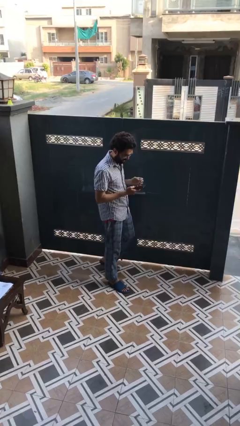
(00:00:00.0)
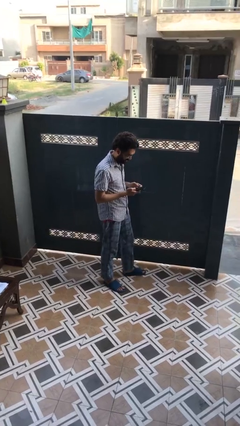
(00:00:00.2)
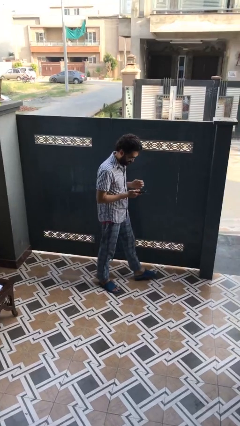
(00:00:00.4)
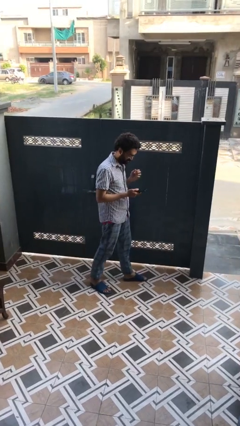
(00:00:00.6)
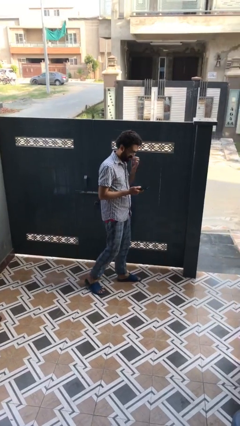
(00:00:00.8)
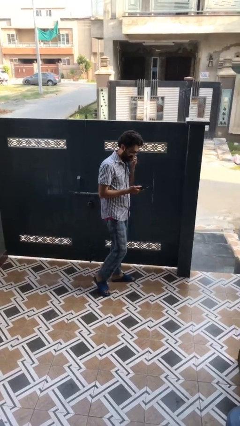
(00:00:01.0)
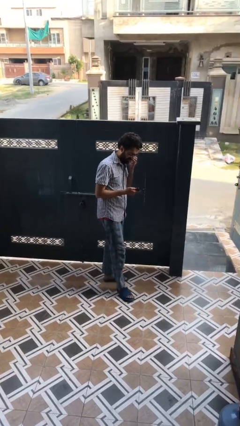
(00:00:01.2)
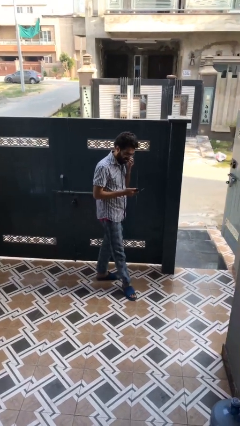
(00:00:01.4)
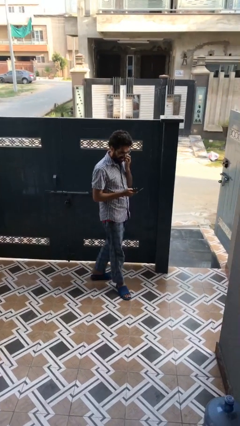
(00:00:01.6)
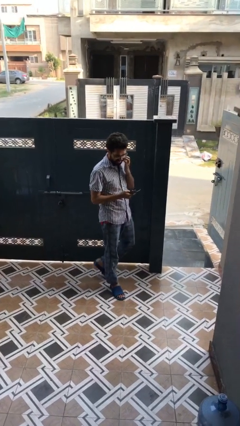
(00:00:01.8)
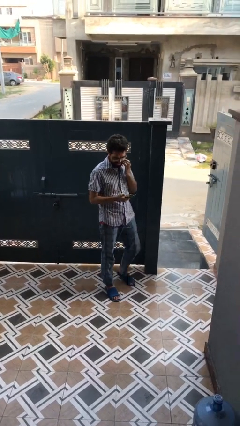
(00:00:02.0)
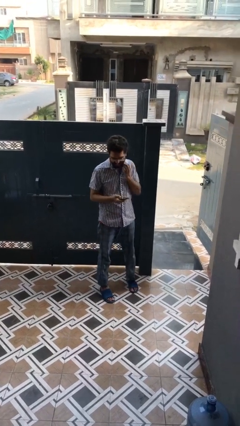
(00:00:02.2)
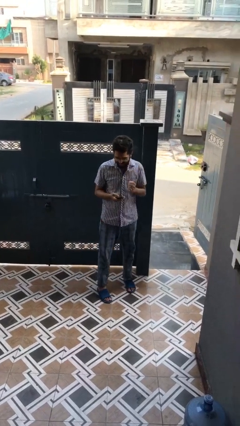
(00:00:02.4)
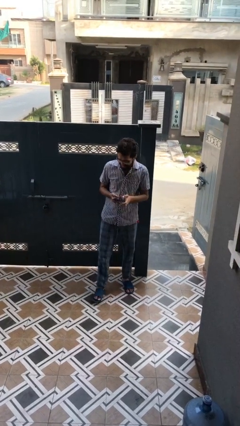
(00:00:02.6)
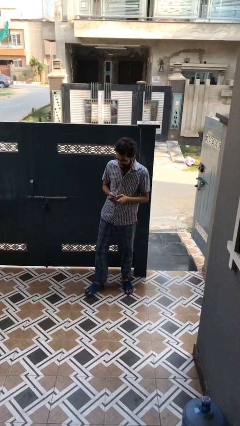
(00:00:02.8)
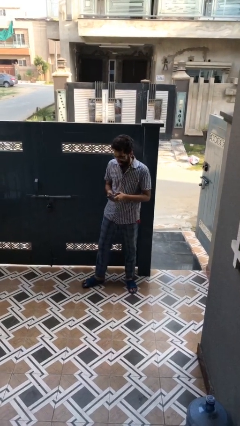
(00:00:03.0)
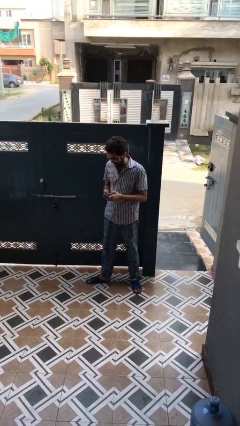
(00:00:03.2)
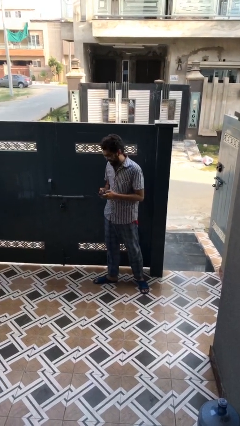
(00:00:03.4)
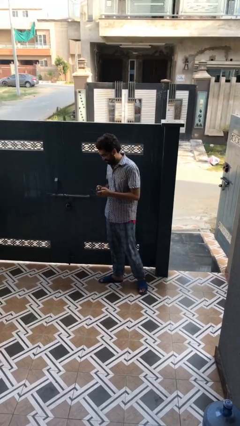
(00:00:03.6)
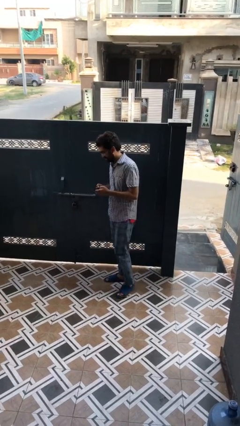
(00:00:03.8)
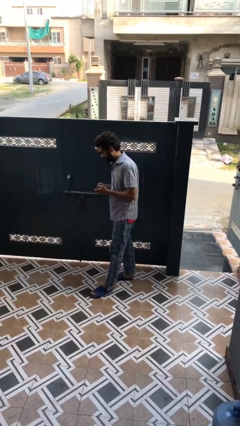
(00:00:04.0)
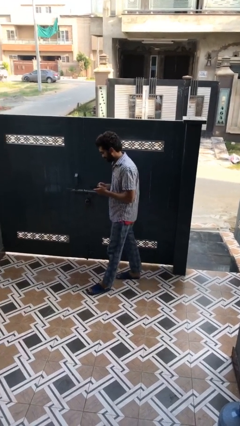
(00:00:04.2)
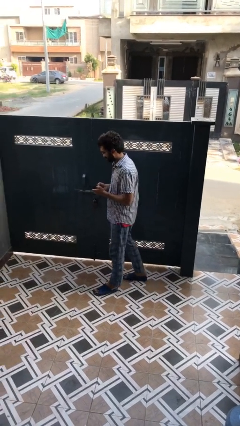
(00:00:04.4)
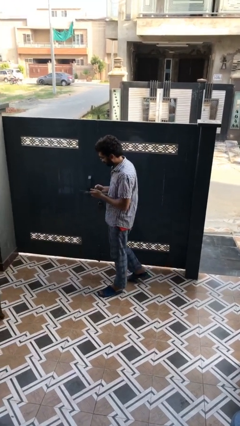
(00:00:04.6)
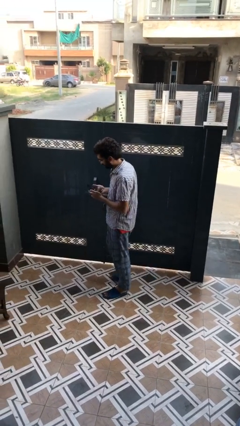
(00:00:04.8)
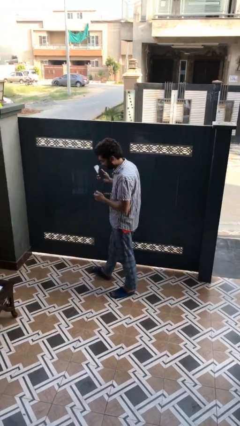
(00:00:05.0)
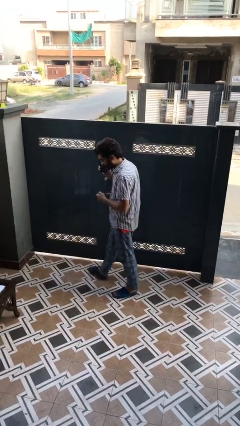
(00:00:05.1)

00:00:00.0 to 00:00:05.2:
person texts on phone

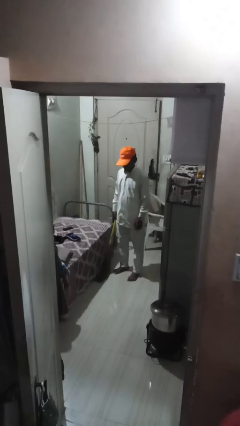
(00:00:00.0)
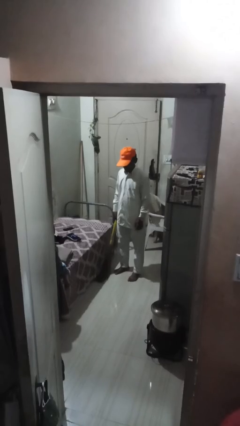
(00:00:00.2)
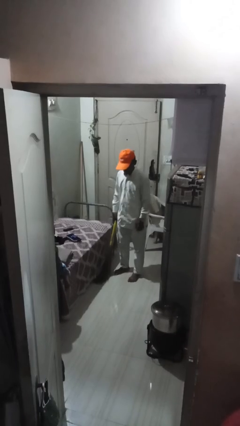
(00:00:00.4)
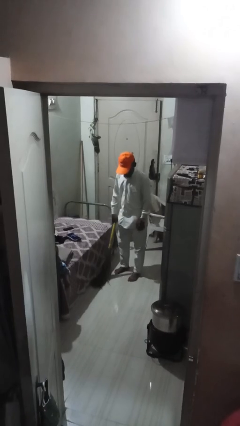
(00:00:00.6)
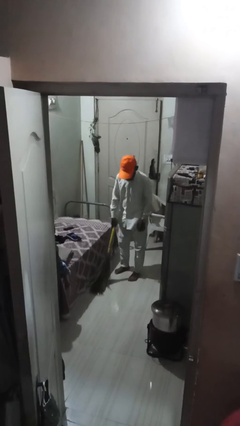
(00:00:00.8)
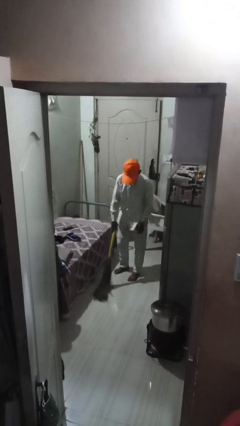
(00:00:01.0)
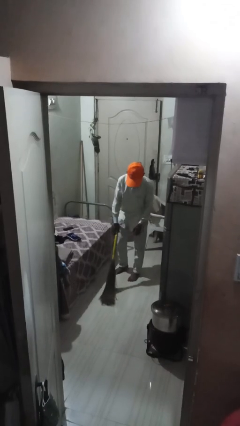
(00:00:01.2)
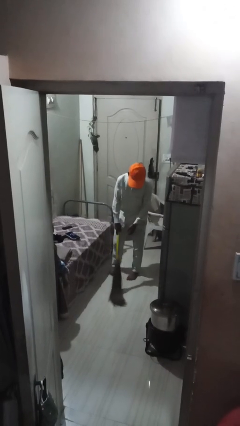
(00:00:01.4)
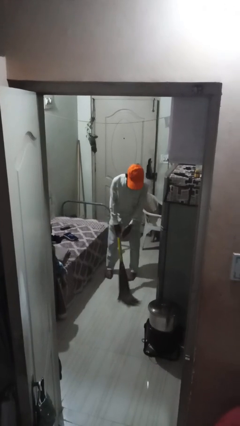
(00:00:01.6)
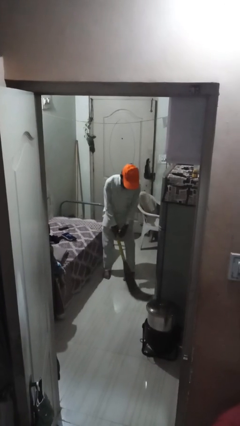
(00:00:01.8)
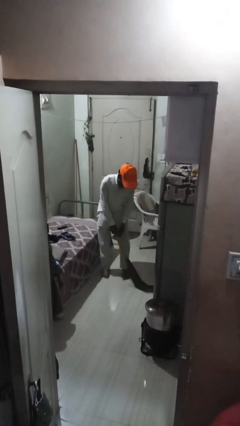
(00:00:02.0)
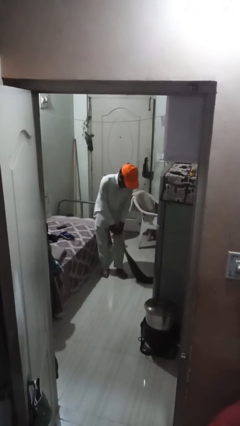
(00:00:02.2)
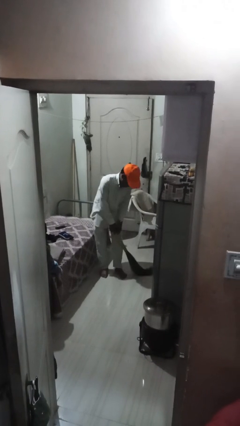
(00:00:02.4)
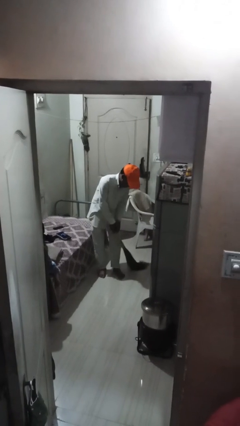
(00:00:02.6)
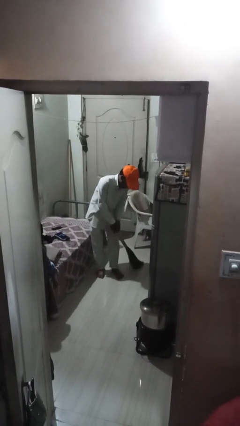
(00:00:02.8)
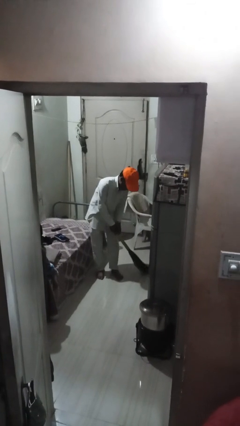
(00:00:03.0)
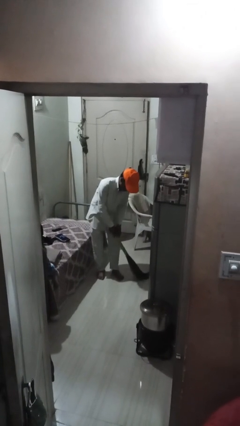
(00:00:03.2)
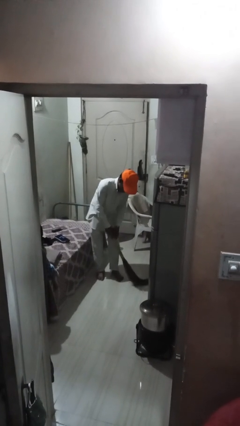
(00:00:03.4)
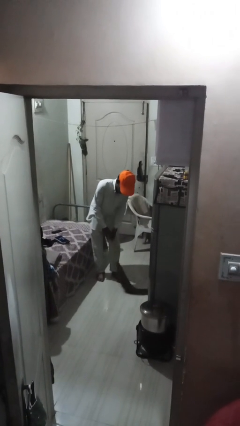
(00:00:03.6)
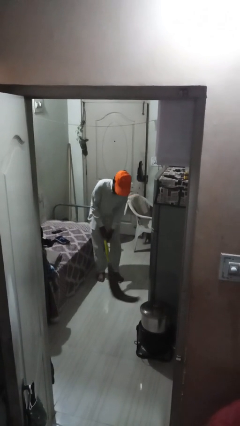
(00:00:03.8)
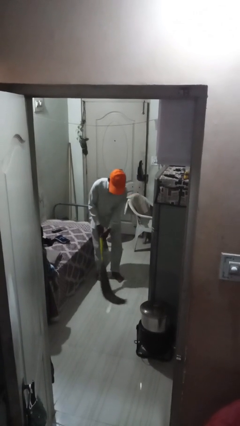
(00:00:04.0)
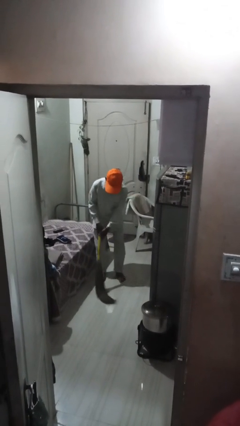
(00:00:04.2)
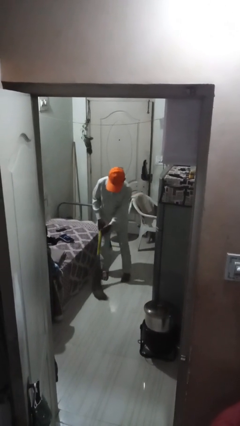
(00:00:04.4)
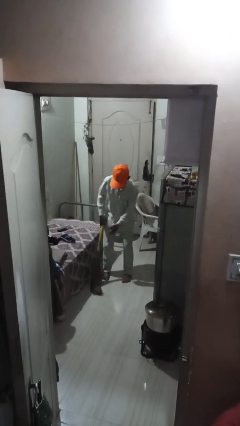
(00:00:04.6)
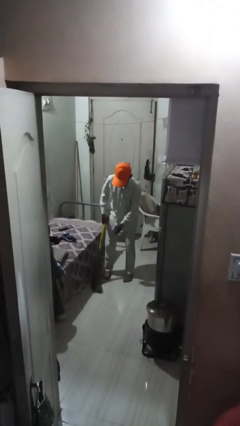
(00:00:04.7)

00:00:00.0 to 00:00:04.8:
person sweeps floor

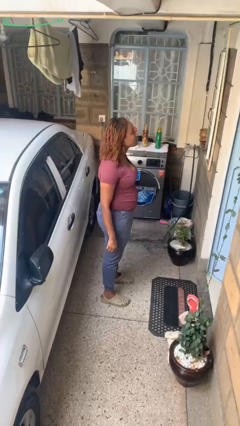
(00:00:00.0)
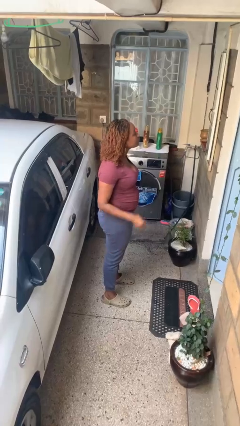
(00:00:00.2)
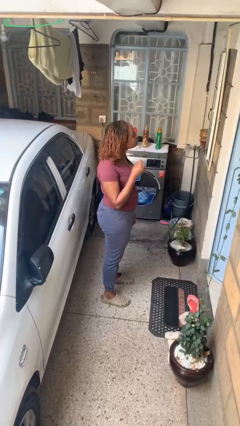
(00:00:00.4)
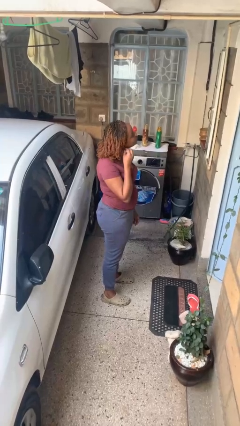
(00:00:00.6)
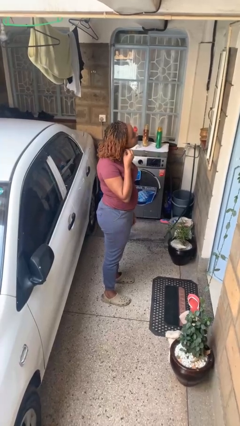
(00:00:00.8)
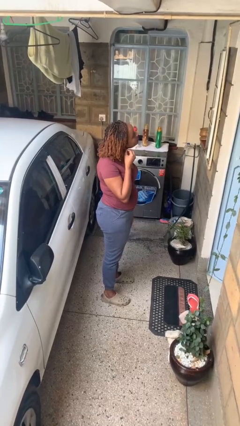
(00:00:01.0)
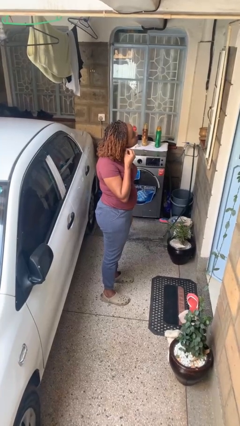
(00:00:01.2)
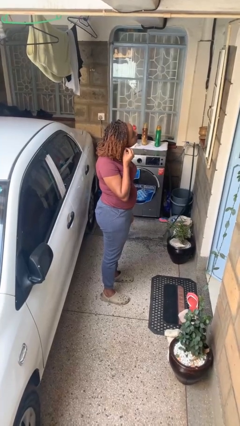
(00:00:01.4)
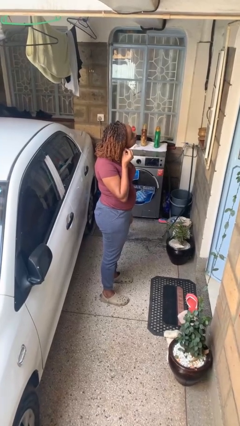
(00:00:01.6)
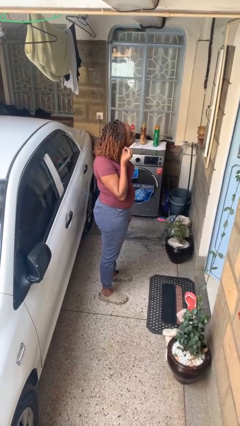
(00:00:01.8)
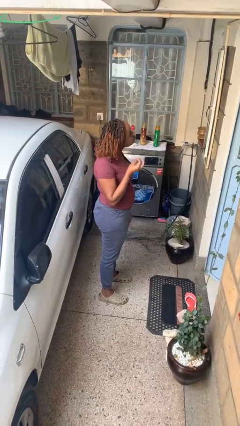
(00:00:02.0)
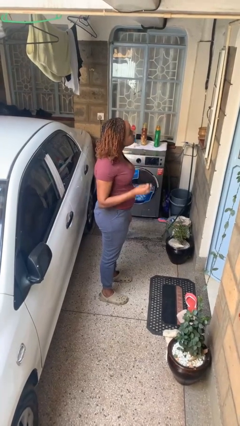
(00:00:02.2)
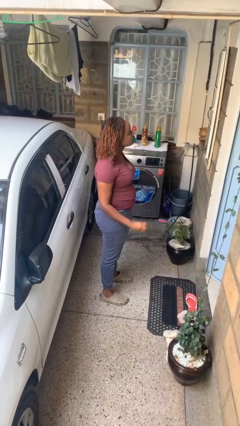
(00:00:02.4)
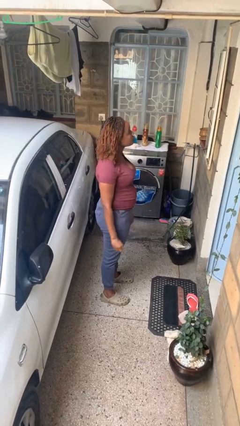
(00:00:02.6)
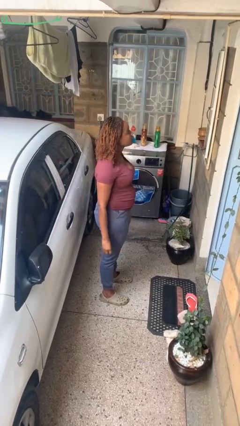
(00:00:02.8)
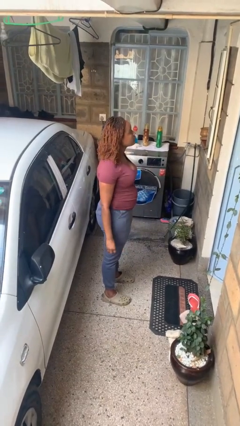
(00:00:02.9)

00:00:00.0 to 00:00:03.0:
person takes off earrings

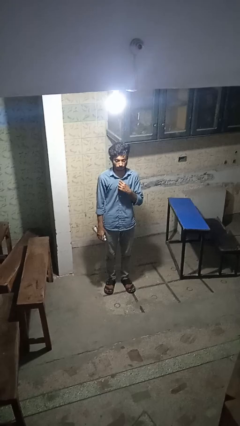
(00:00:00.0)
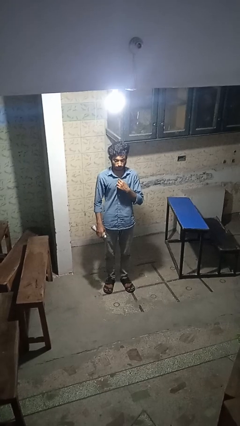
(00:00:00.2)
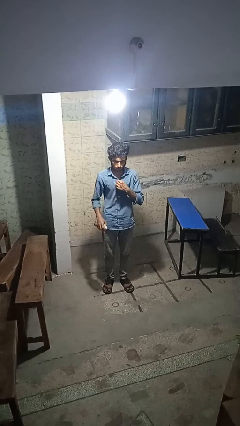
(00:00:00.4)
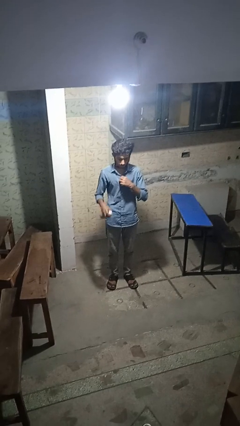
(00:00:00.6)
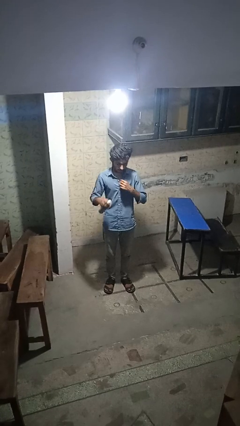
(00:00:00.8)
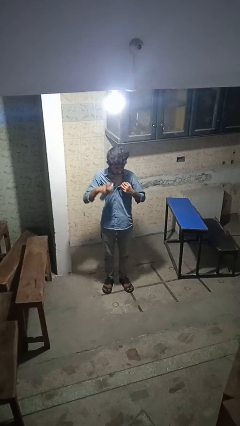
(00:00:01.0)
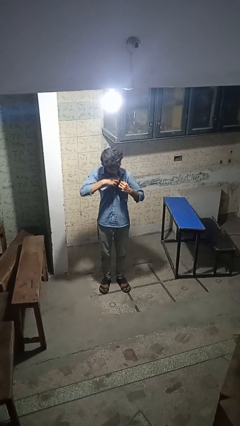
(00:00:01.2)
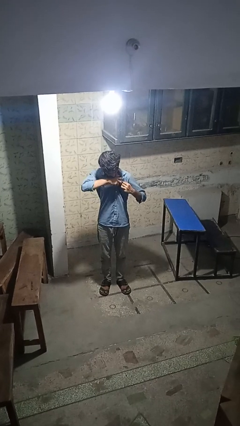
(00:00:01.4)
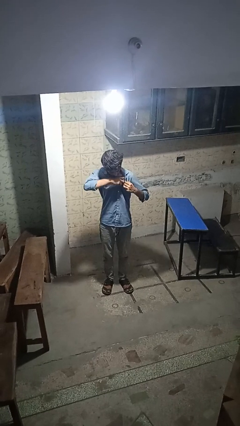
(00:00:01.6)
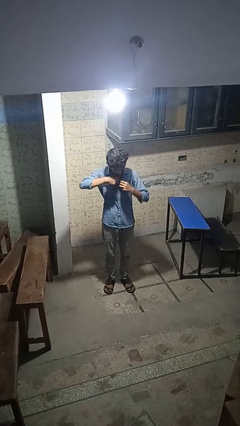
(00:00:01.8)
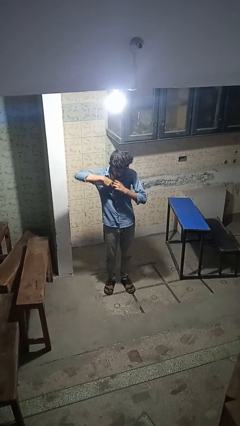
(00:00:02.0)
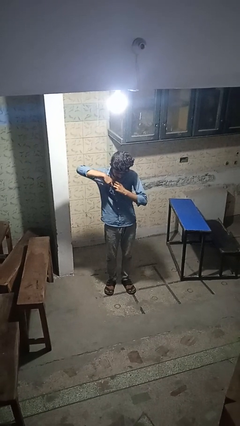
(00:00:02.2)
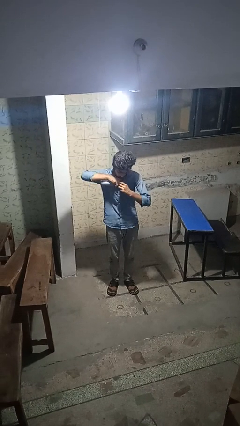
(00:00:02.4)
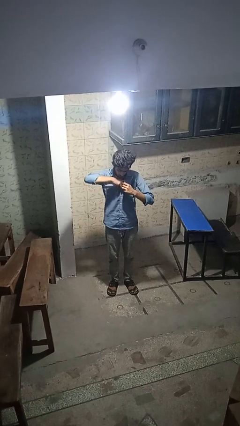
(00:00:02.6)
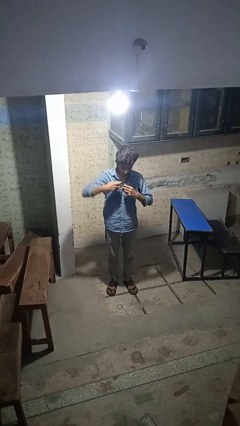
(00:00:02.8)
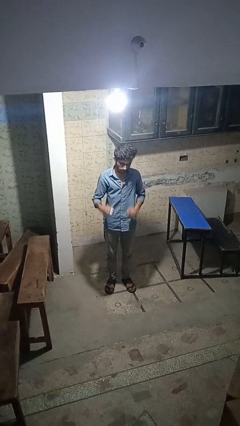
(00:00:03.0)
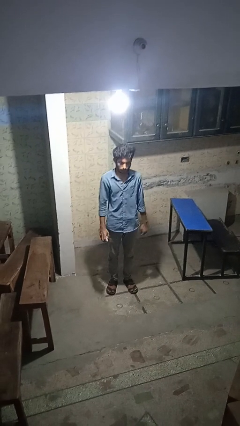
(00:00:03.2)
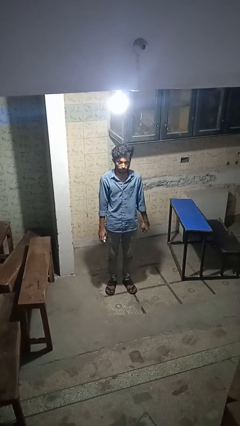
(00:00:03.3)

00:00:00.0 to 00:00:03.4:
person applies deodorant

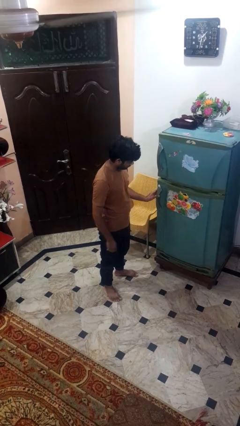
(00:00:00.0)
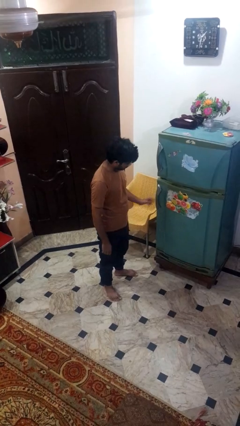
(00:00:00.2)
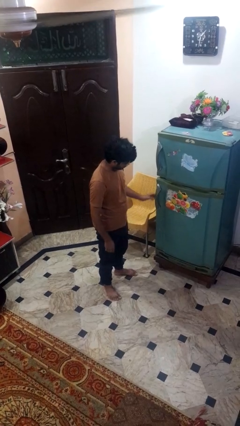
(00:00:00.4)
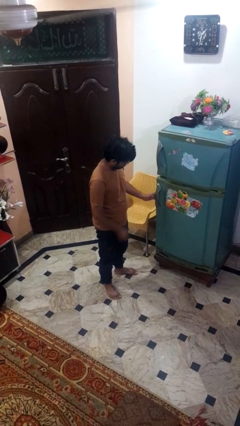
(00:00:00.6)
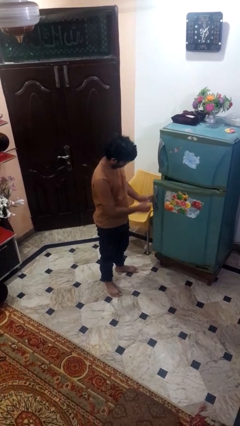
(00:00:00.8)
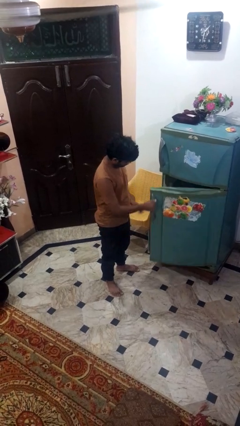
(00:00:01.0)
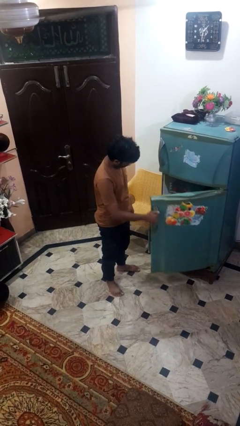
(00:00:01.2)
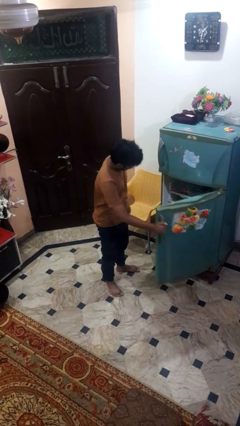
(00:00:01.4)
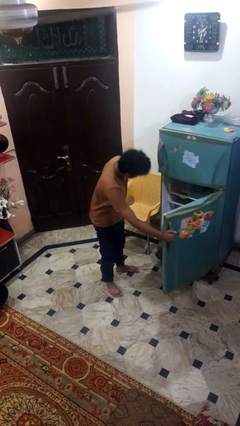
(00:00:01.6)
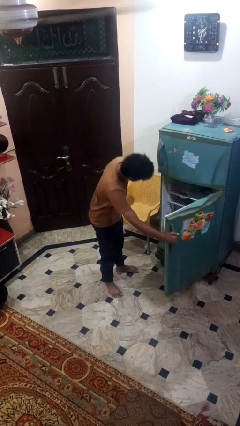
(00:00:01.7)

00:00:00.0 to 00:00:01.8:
person opens refrigerator
